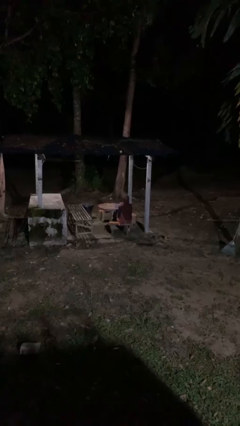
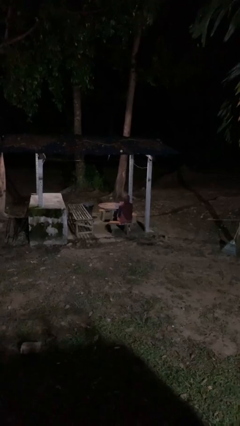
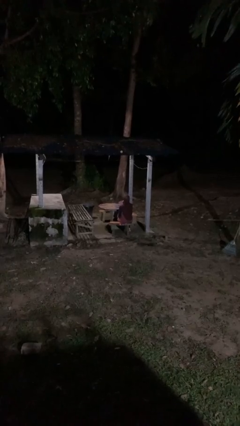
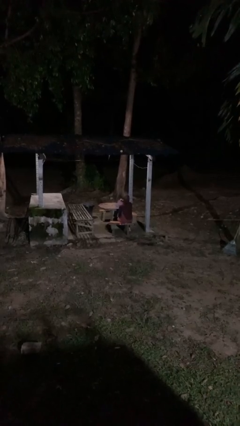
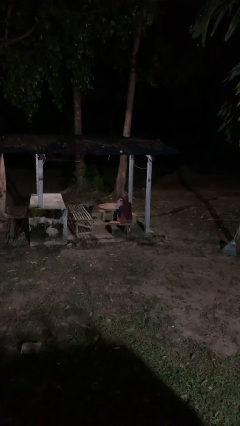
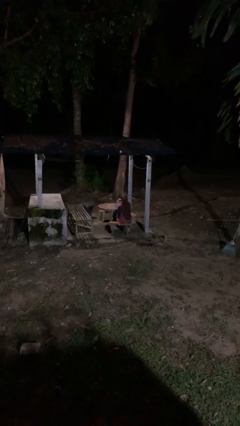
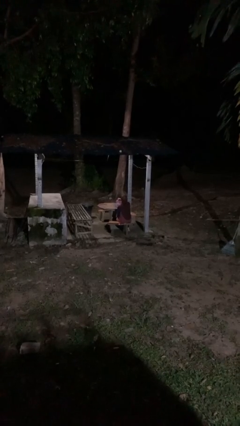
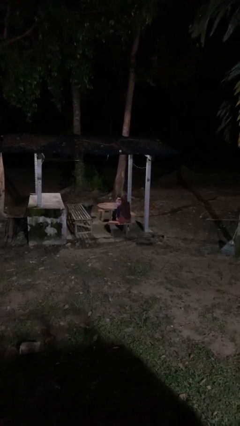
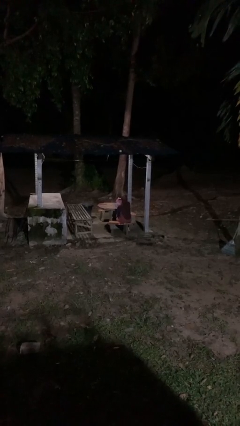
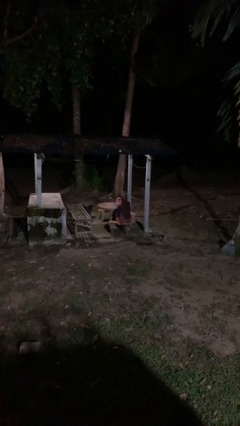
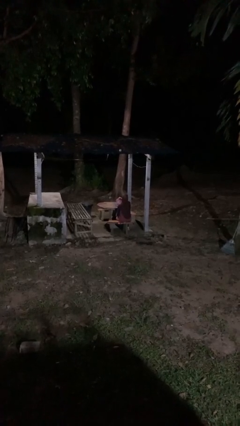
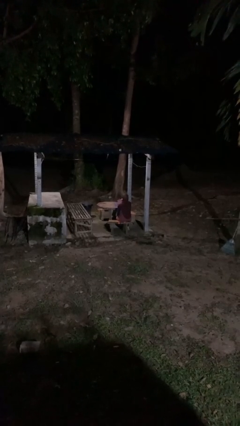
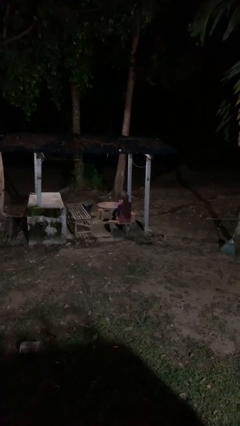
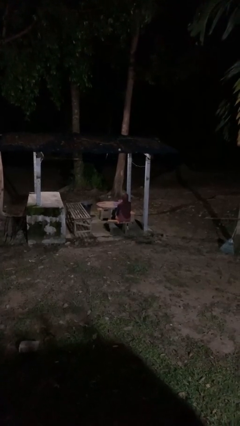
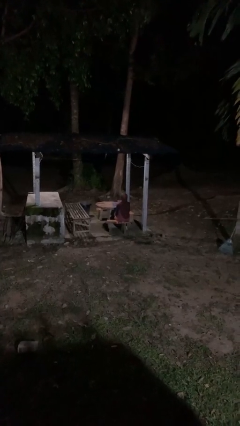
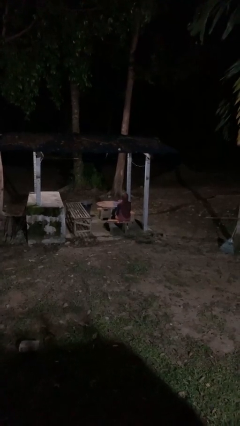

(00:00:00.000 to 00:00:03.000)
person pours coffee into mug

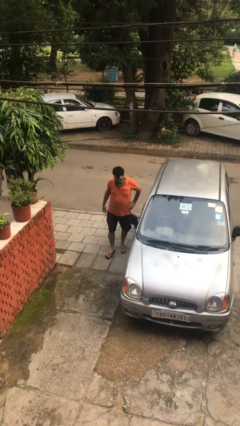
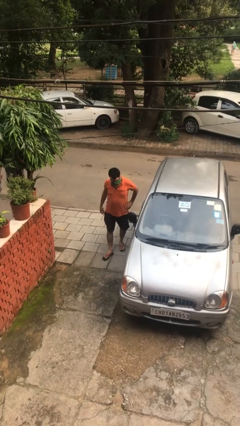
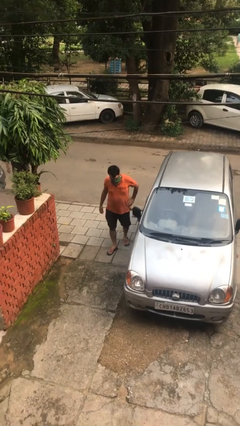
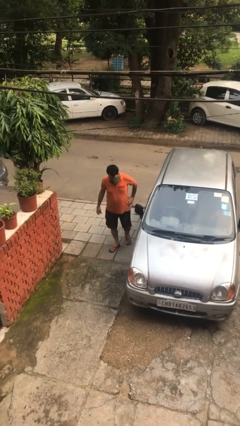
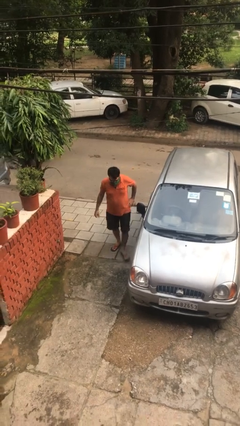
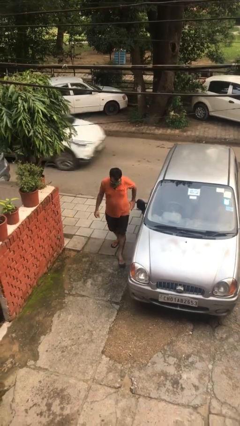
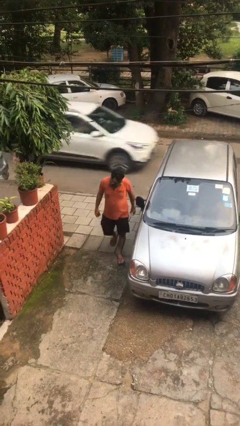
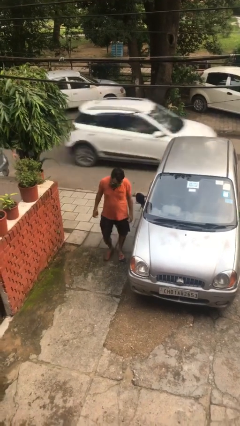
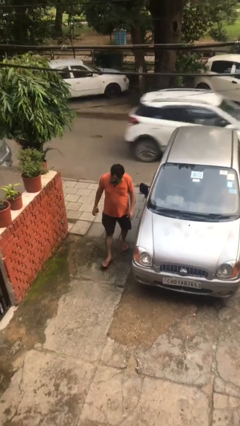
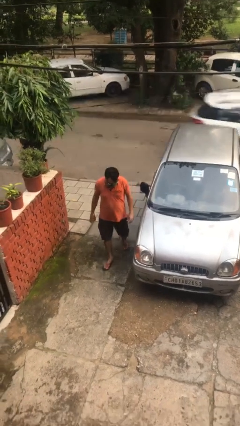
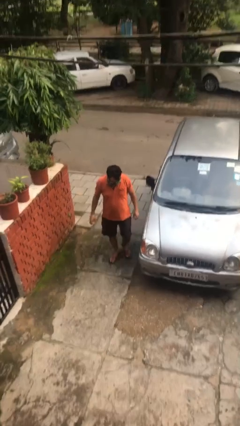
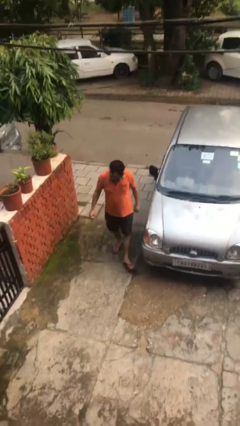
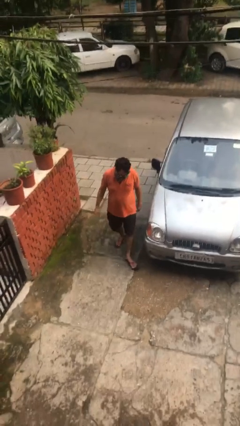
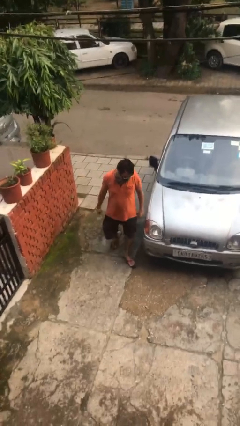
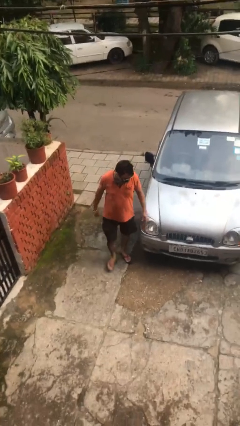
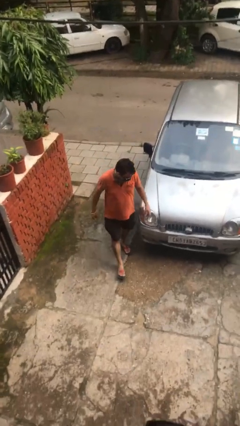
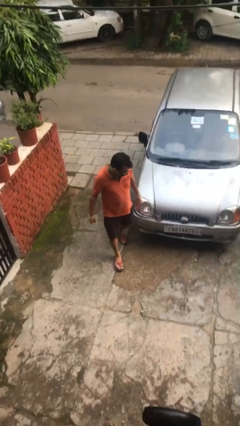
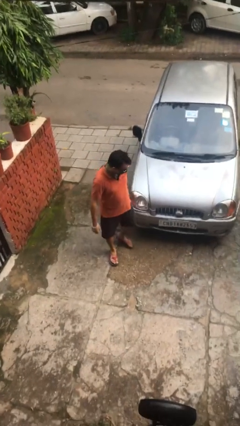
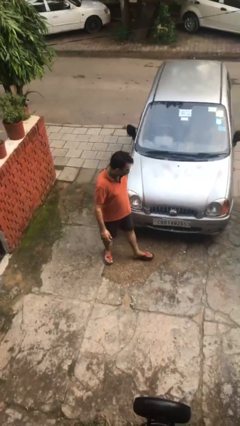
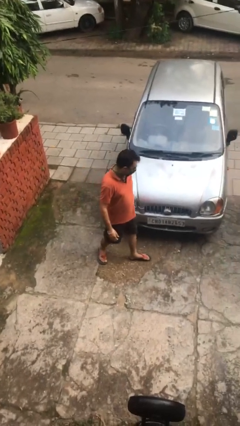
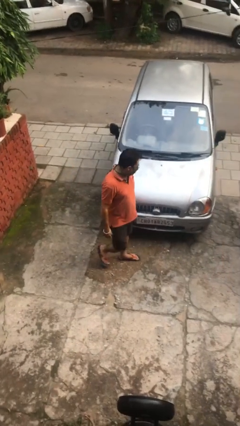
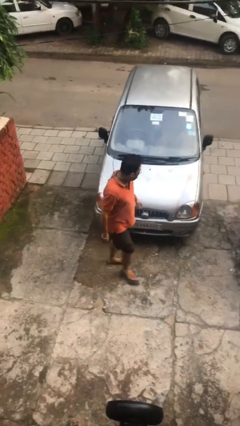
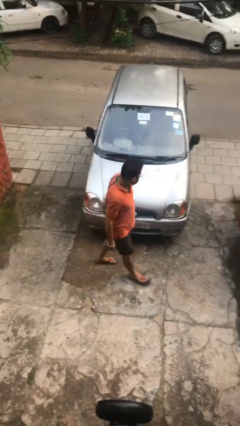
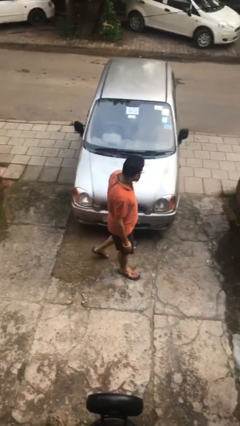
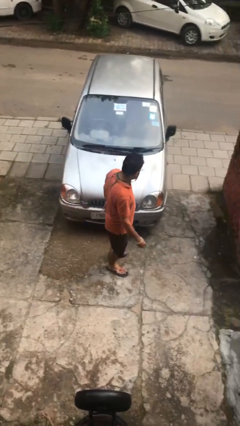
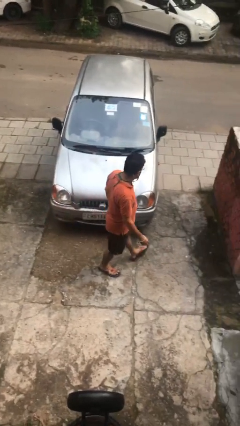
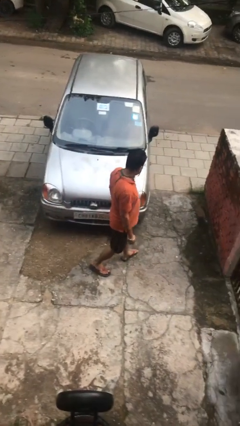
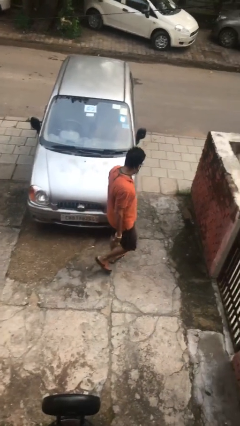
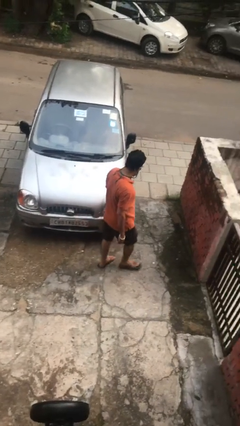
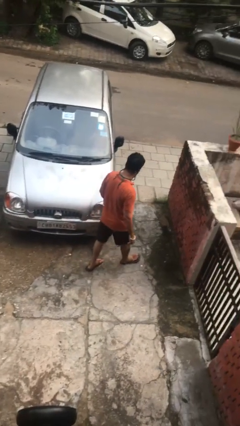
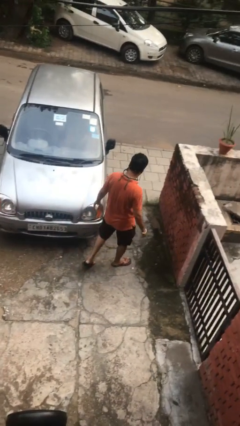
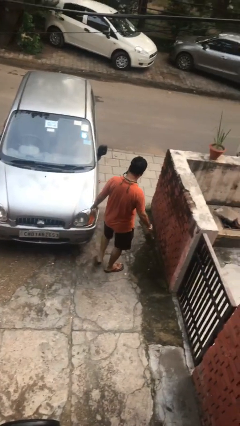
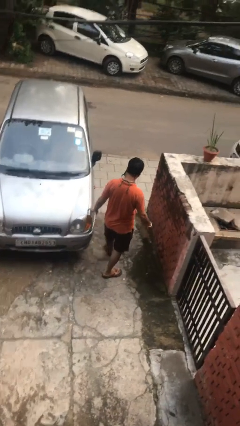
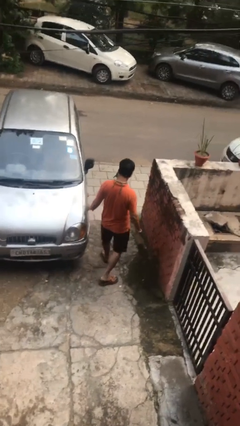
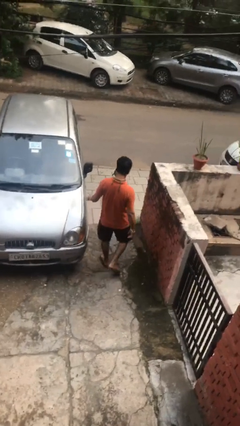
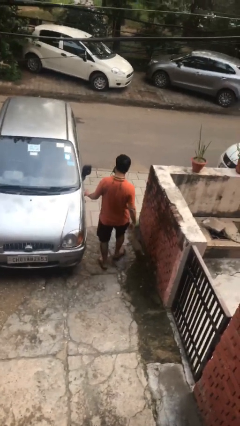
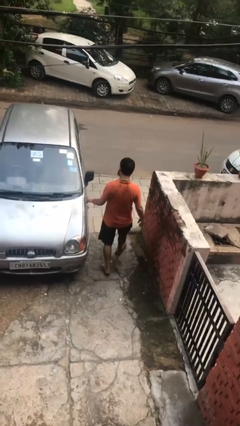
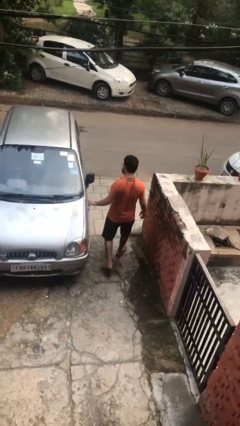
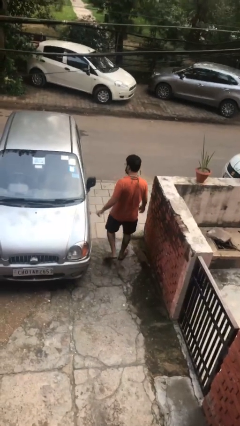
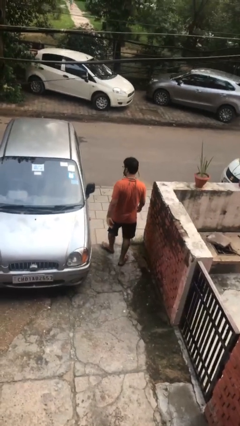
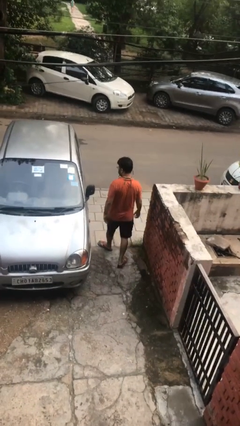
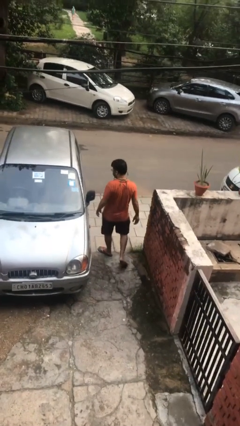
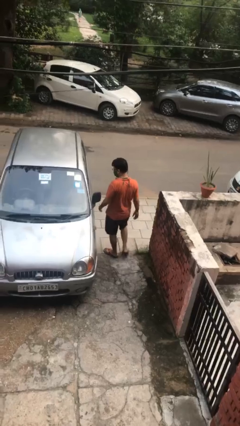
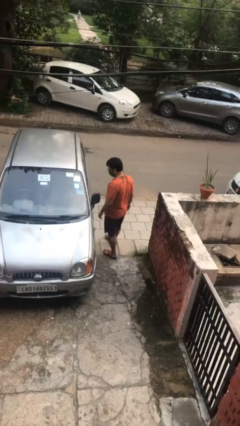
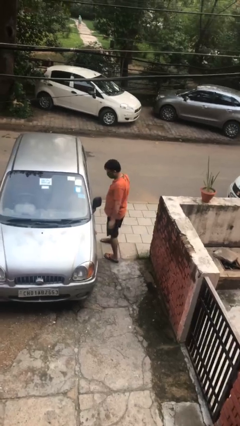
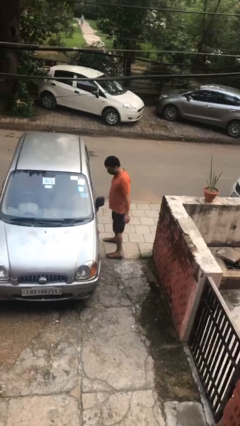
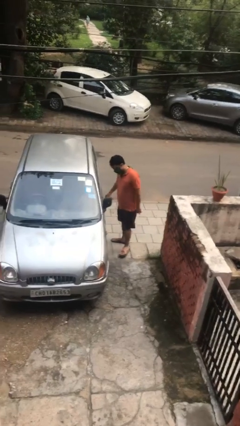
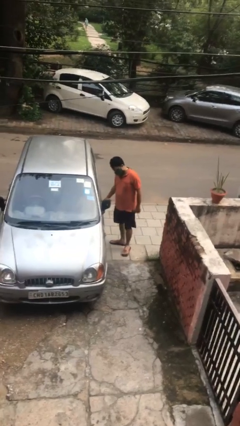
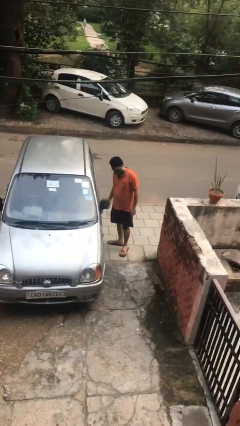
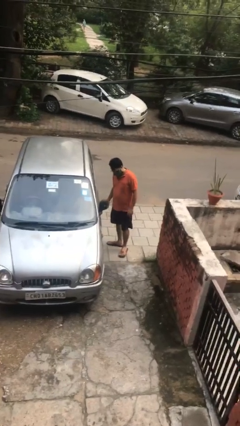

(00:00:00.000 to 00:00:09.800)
person walks around car

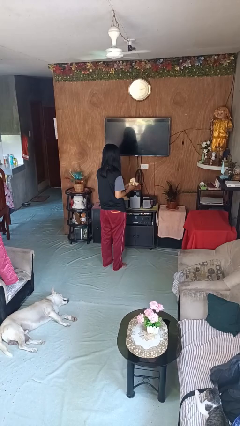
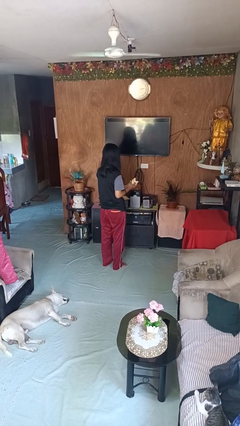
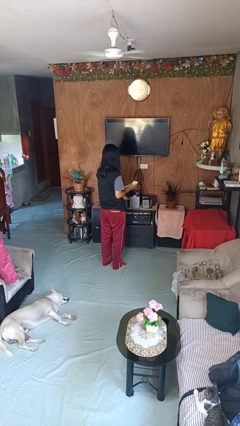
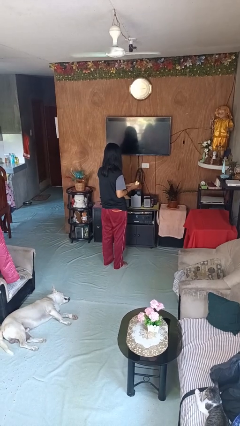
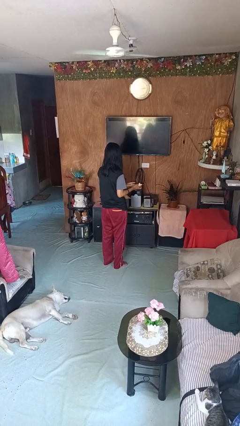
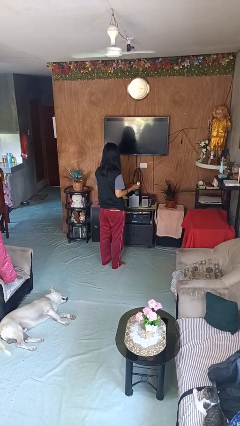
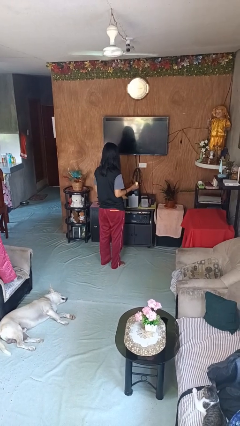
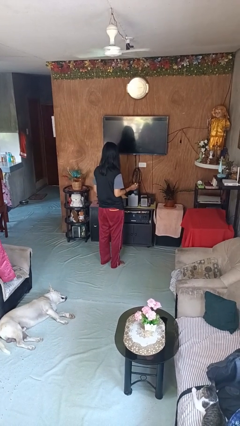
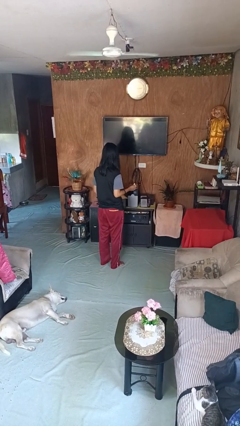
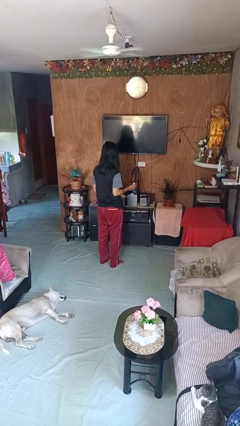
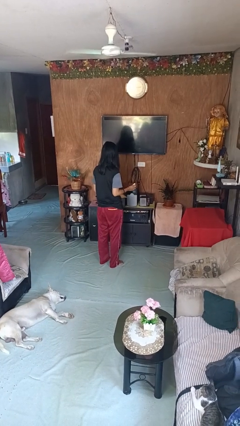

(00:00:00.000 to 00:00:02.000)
person crumples paper

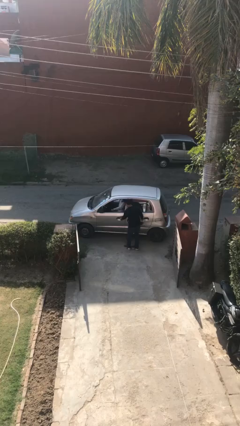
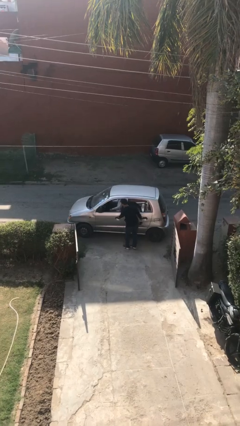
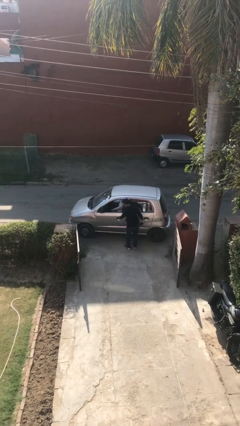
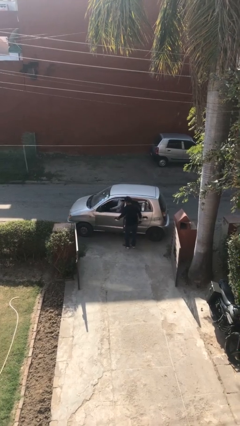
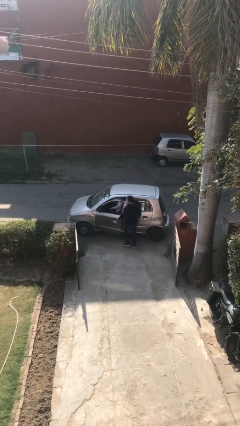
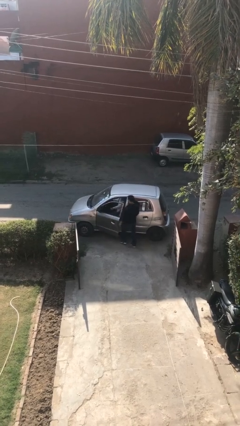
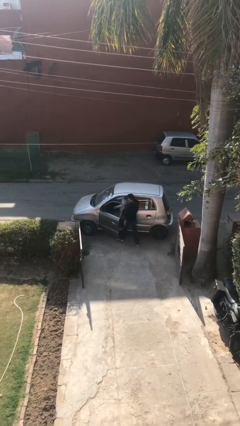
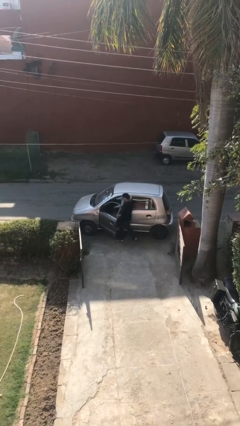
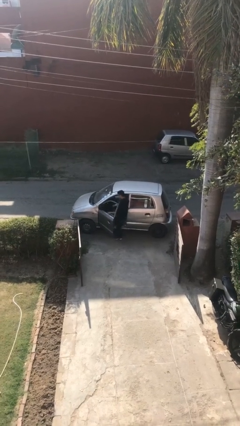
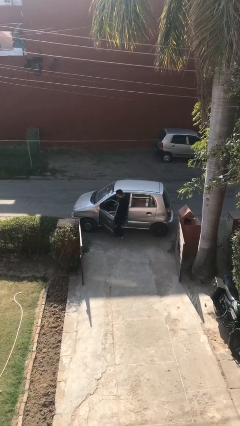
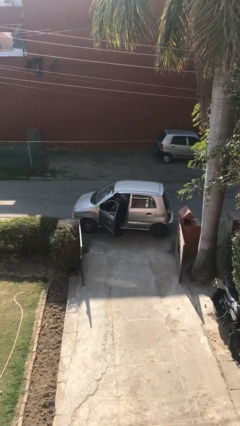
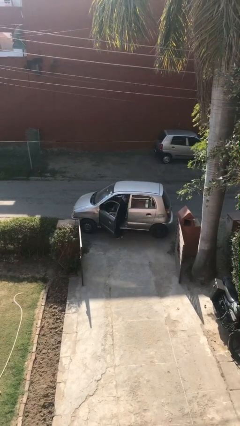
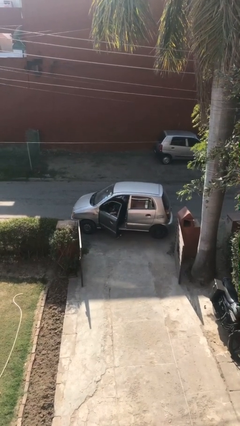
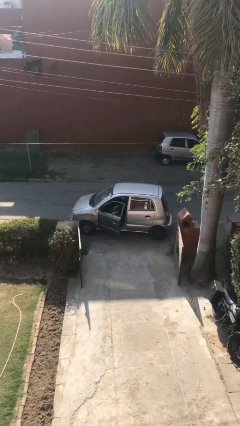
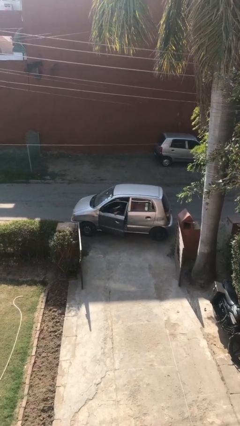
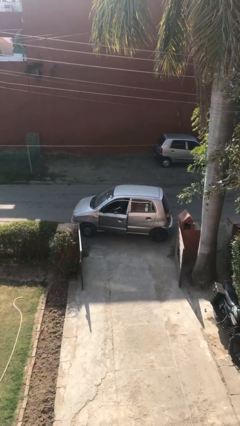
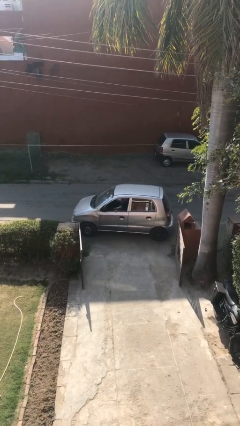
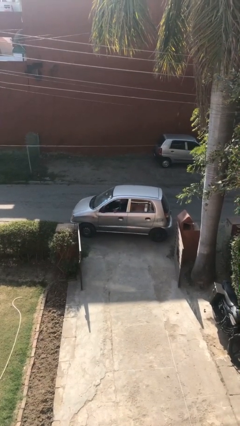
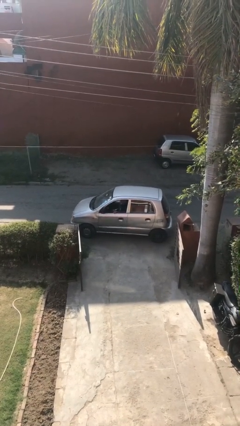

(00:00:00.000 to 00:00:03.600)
car picks up person
